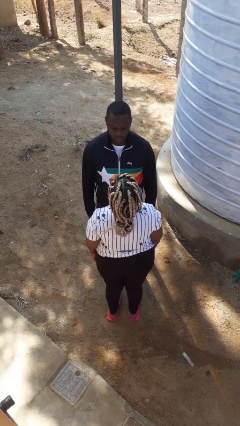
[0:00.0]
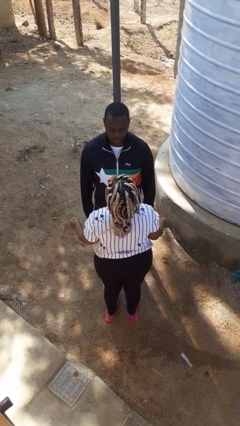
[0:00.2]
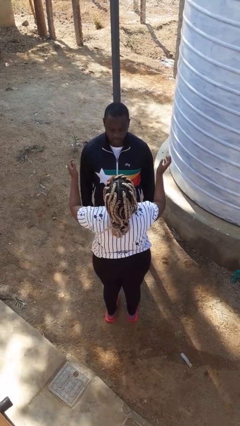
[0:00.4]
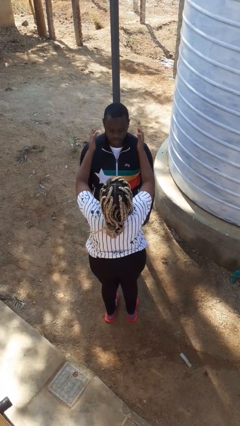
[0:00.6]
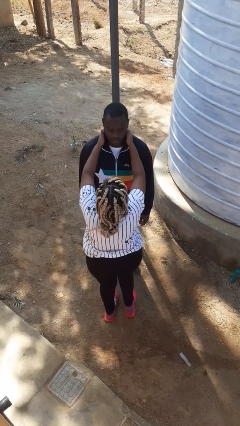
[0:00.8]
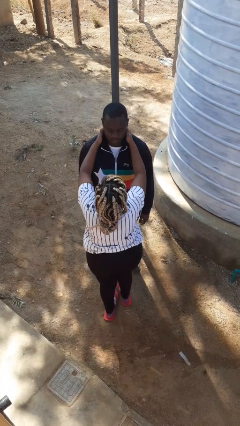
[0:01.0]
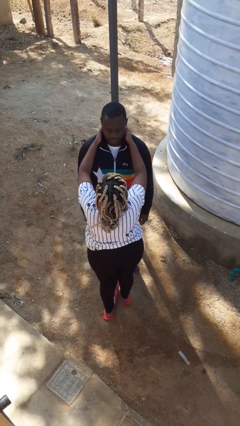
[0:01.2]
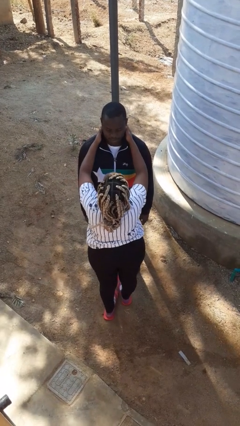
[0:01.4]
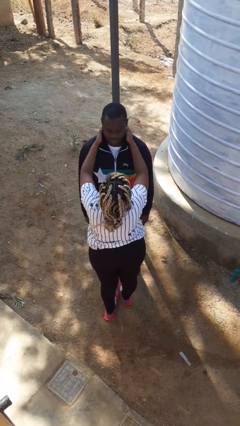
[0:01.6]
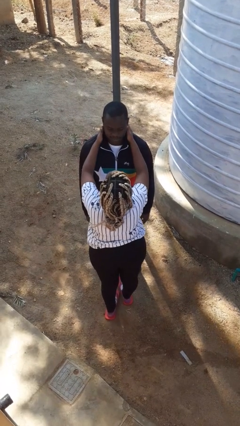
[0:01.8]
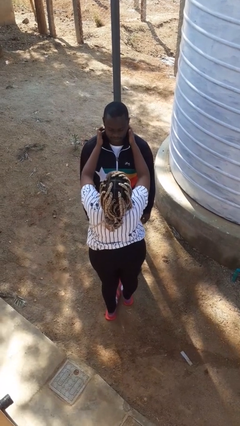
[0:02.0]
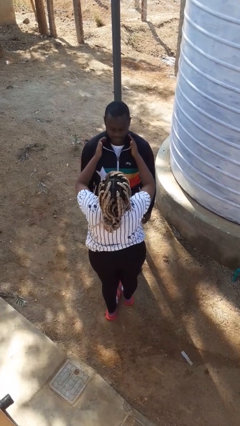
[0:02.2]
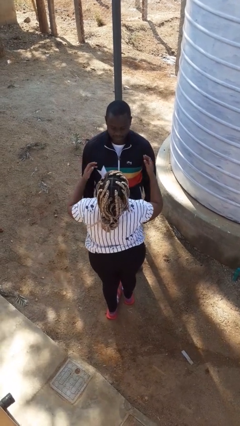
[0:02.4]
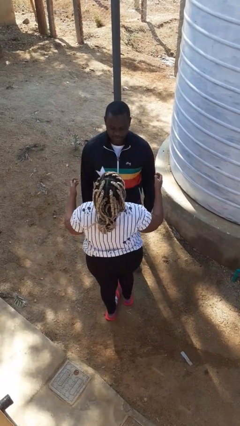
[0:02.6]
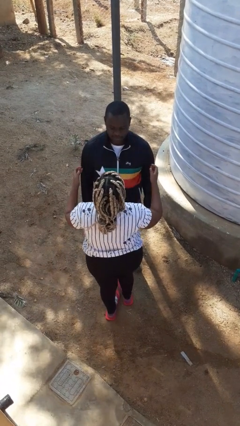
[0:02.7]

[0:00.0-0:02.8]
person tickles person

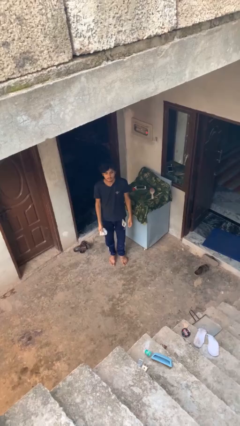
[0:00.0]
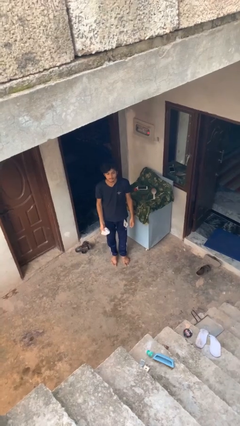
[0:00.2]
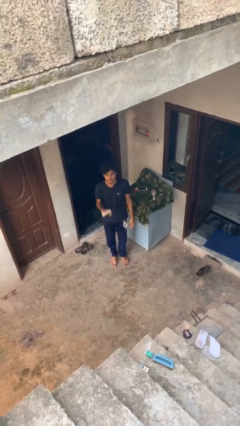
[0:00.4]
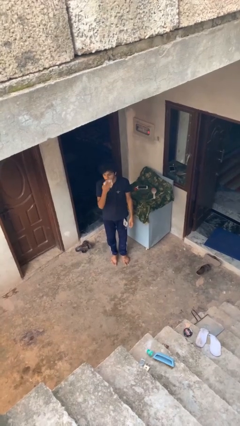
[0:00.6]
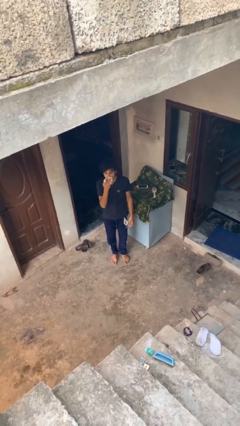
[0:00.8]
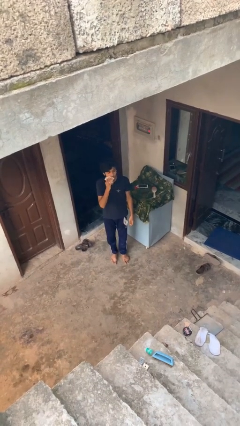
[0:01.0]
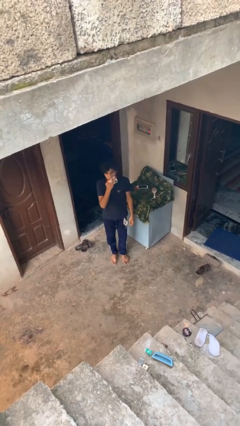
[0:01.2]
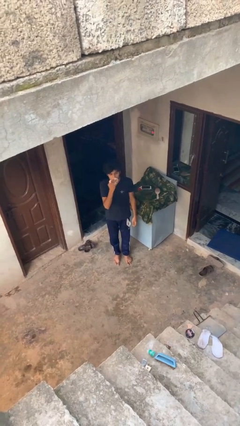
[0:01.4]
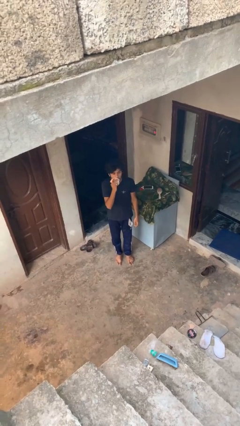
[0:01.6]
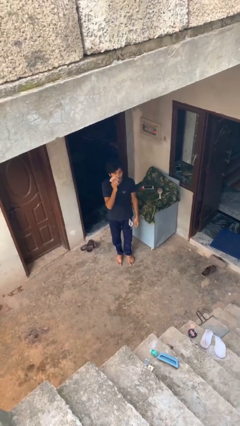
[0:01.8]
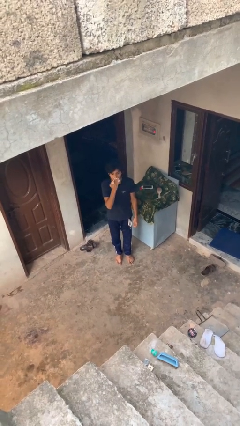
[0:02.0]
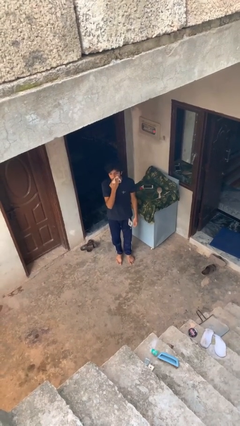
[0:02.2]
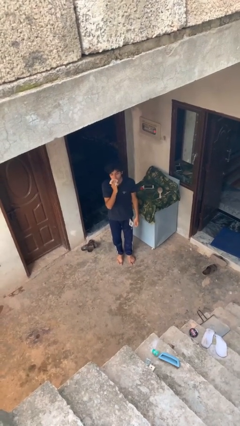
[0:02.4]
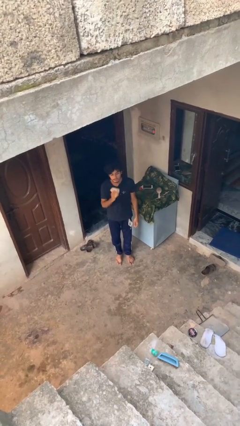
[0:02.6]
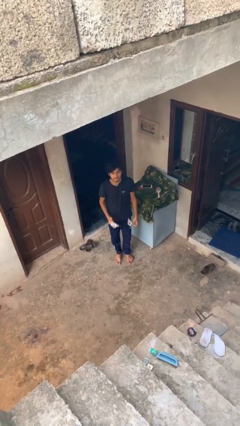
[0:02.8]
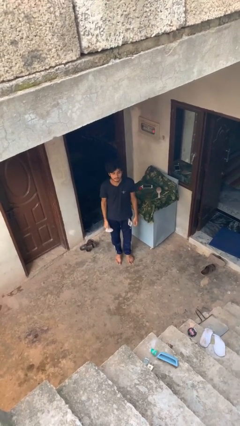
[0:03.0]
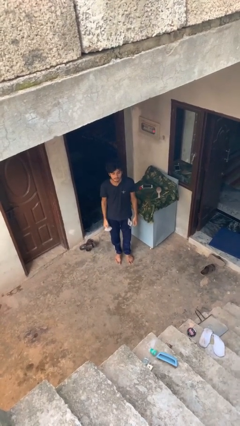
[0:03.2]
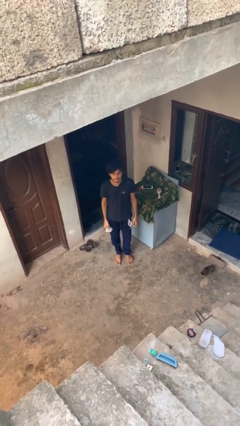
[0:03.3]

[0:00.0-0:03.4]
person wipes mouth with napkin

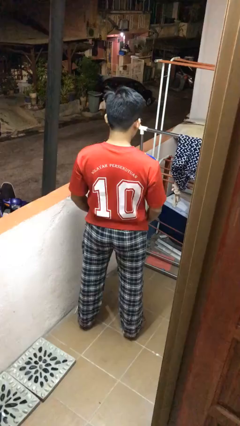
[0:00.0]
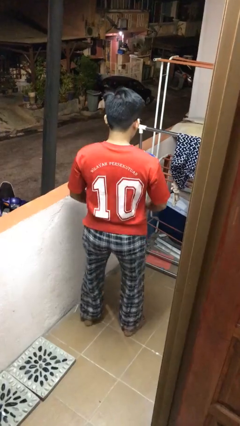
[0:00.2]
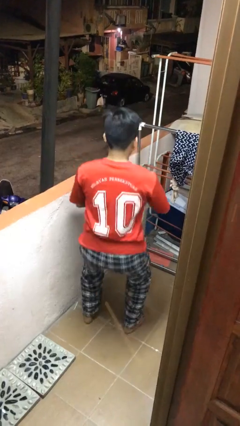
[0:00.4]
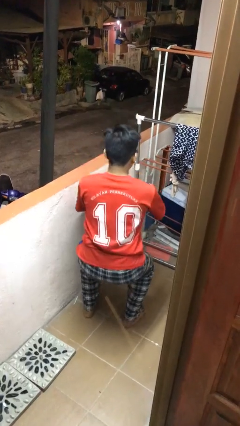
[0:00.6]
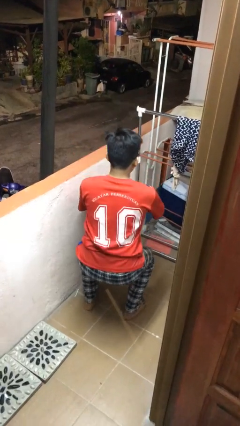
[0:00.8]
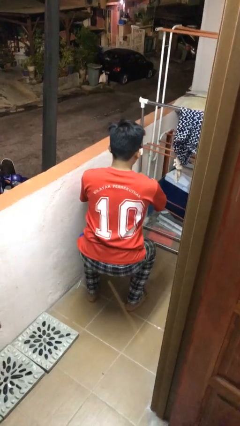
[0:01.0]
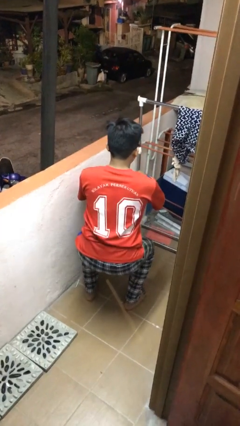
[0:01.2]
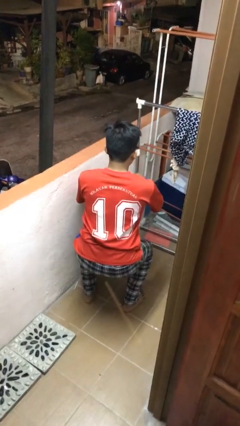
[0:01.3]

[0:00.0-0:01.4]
person squats

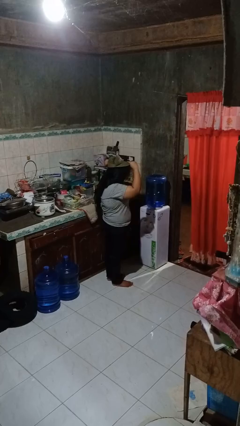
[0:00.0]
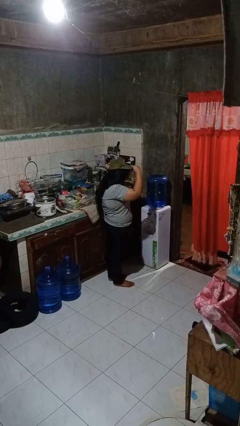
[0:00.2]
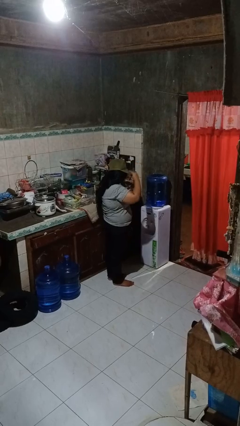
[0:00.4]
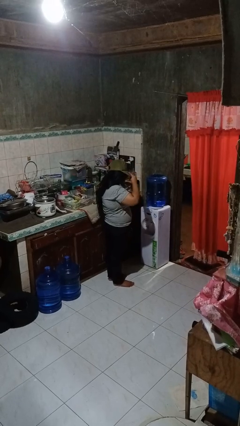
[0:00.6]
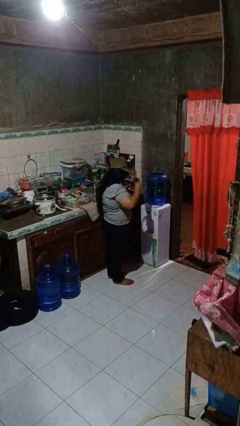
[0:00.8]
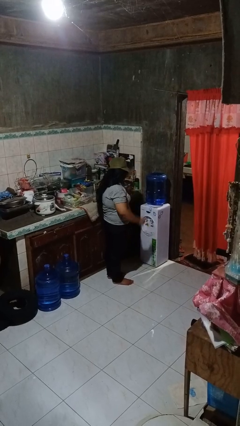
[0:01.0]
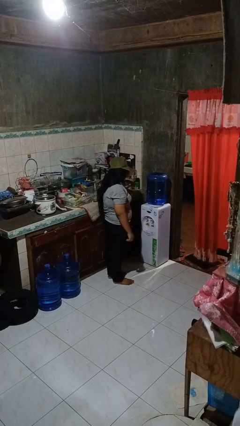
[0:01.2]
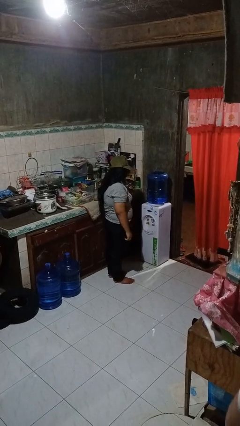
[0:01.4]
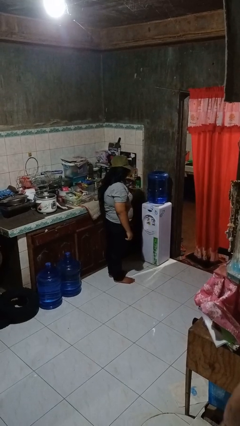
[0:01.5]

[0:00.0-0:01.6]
person puts on hat

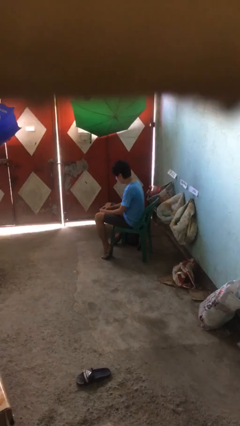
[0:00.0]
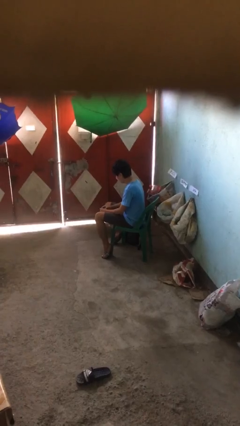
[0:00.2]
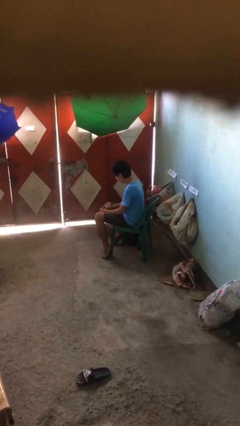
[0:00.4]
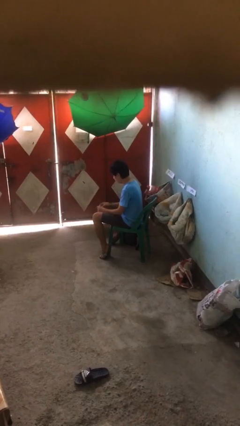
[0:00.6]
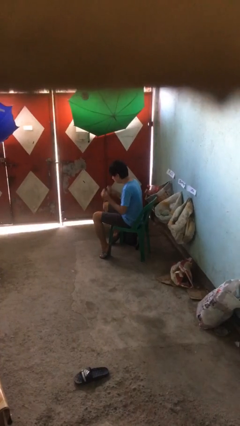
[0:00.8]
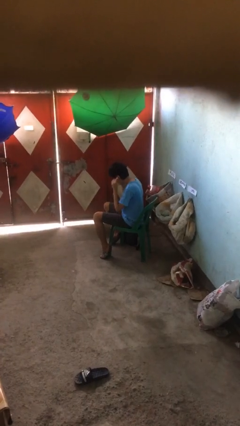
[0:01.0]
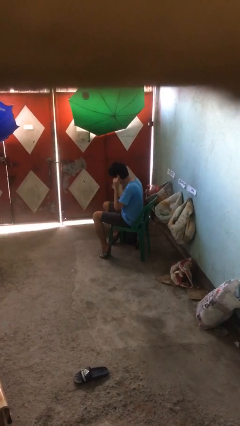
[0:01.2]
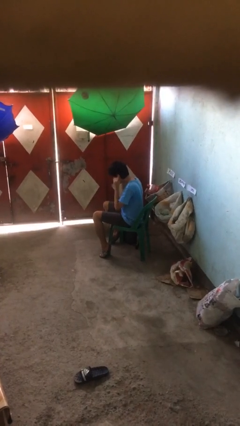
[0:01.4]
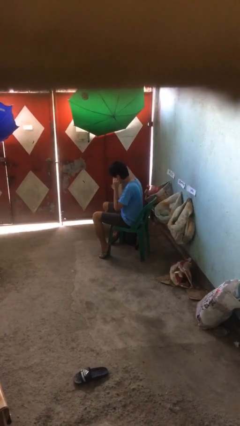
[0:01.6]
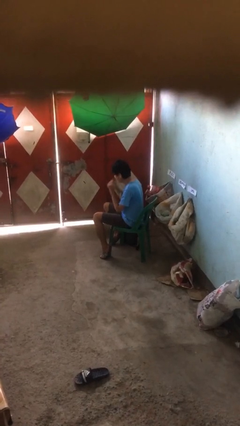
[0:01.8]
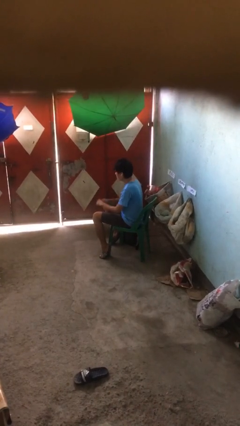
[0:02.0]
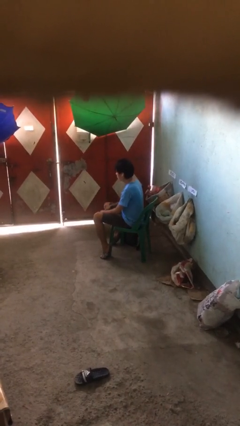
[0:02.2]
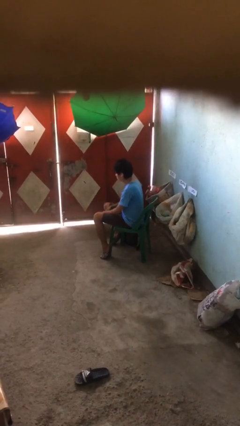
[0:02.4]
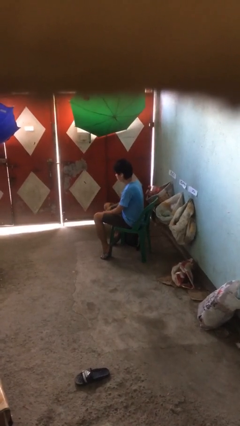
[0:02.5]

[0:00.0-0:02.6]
person puts on headphones

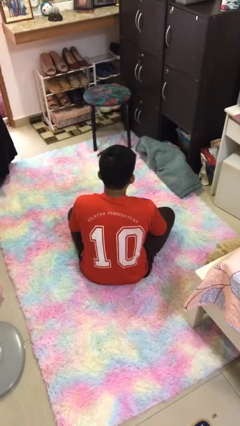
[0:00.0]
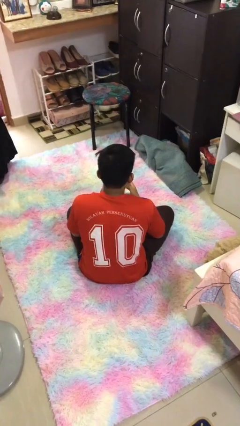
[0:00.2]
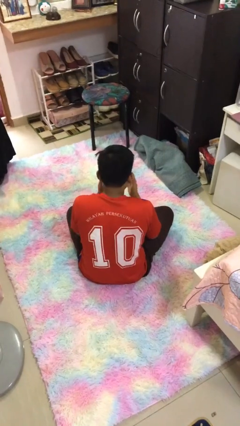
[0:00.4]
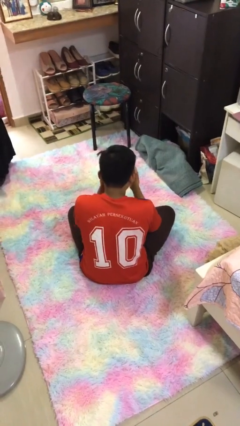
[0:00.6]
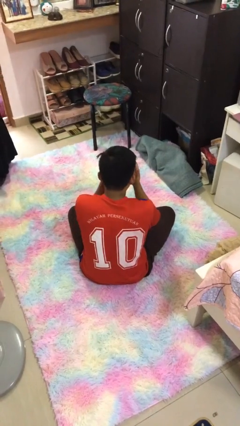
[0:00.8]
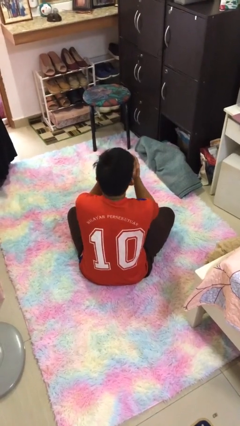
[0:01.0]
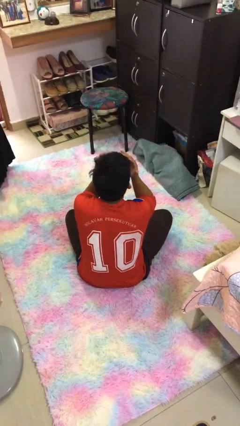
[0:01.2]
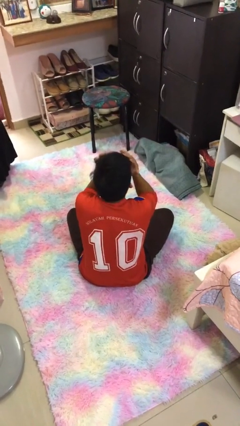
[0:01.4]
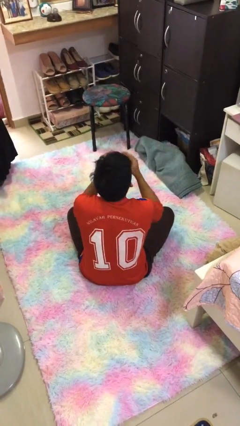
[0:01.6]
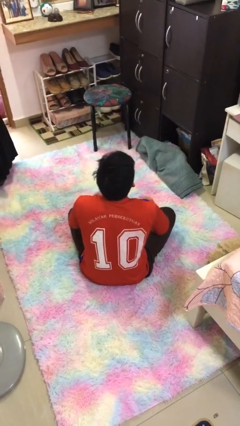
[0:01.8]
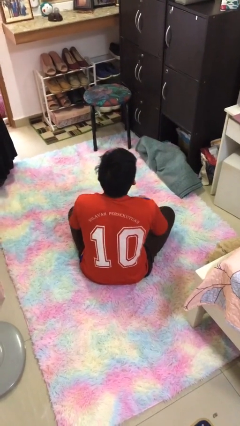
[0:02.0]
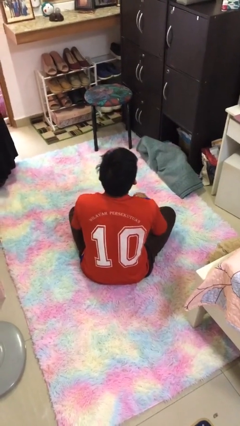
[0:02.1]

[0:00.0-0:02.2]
person covers face with hands

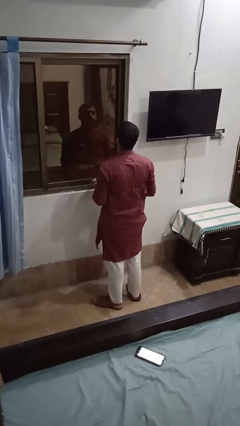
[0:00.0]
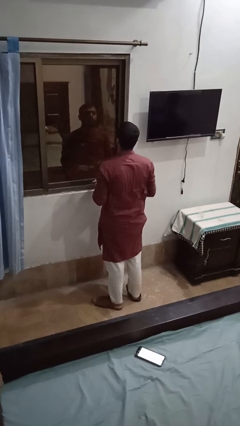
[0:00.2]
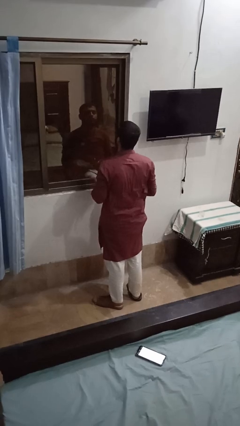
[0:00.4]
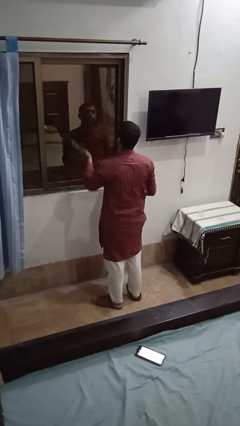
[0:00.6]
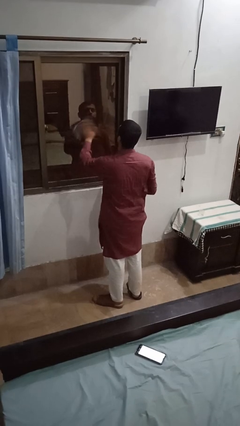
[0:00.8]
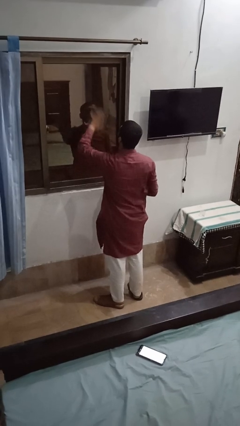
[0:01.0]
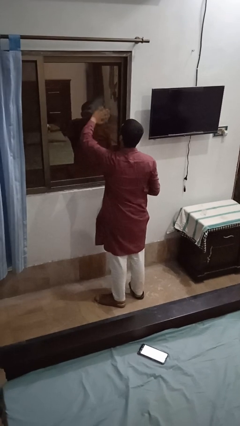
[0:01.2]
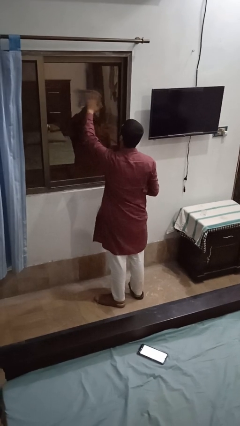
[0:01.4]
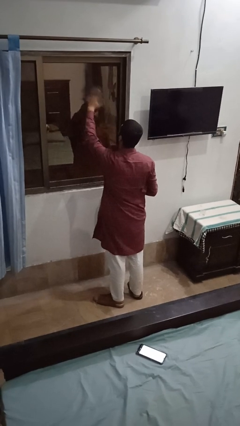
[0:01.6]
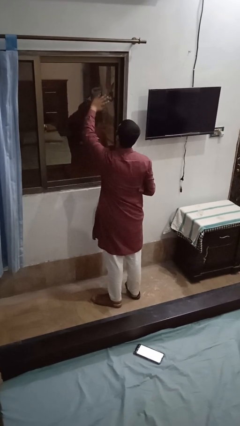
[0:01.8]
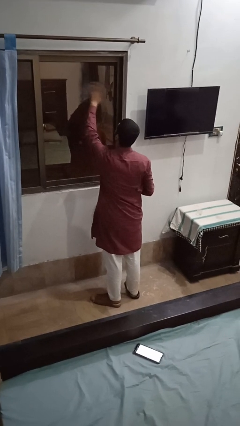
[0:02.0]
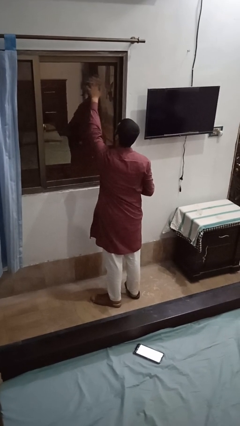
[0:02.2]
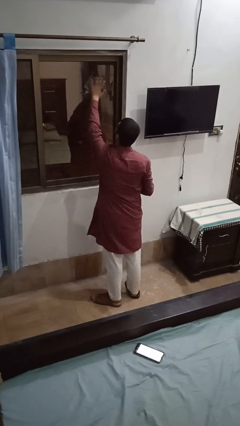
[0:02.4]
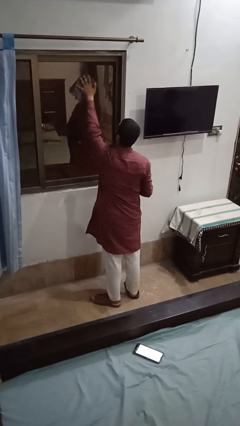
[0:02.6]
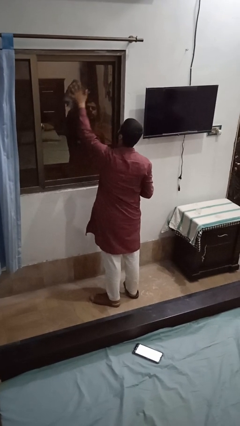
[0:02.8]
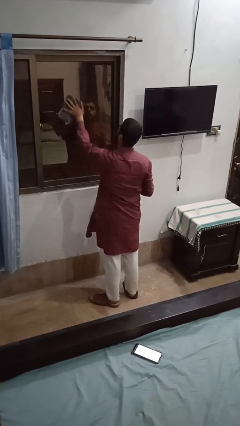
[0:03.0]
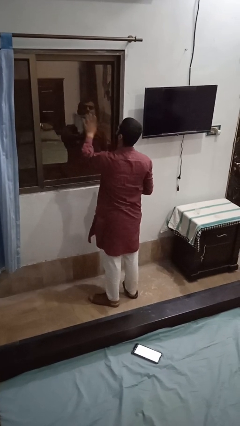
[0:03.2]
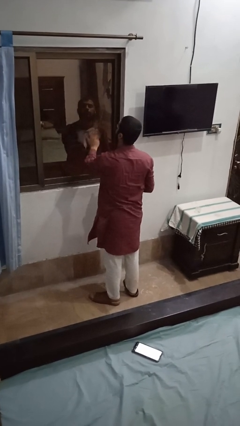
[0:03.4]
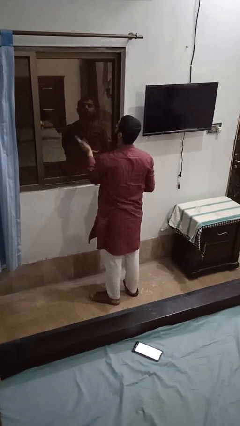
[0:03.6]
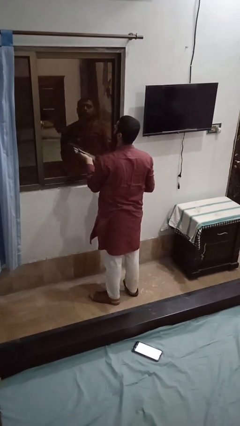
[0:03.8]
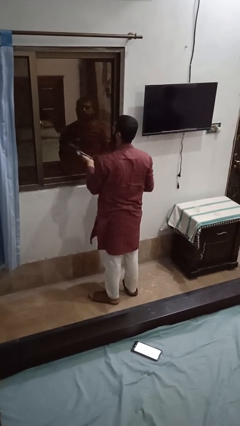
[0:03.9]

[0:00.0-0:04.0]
person washes window
